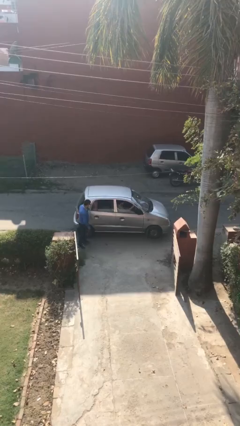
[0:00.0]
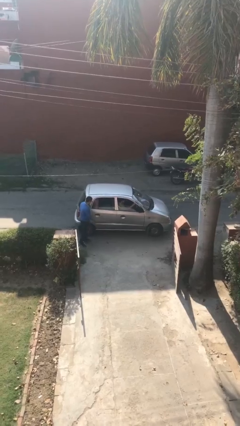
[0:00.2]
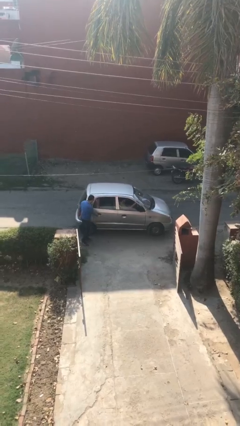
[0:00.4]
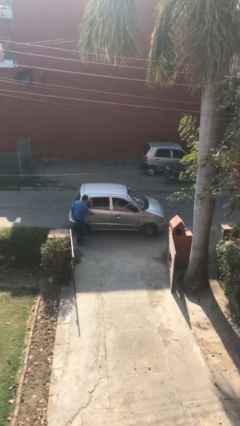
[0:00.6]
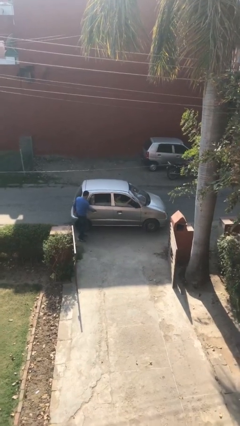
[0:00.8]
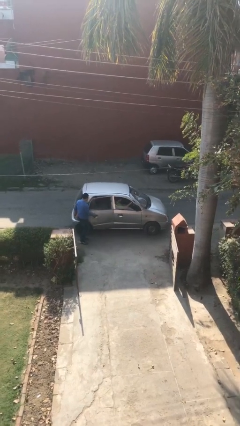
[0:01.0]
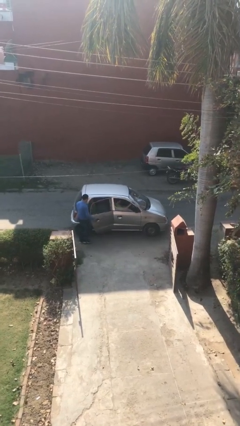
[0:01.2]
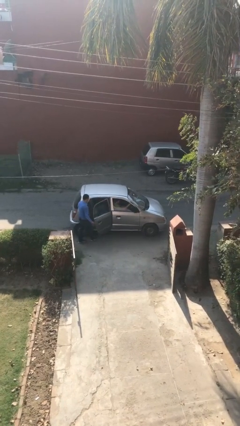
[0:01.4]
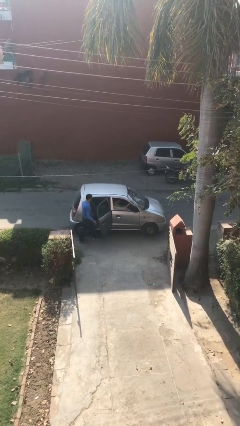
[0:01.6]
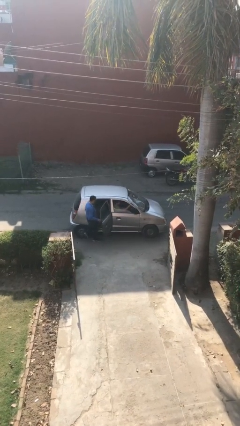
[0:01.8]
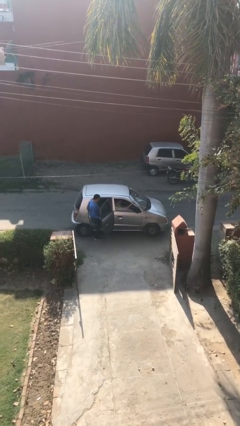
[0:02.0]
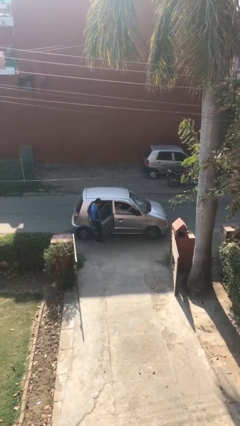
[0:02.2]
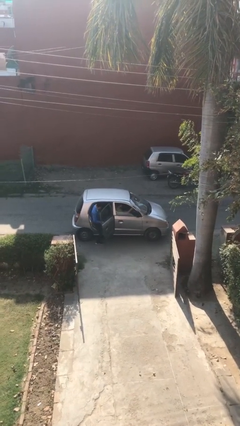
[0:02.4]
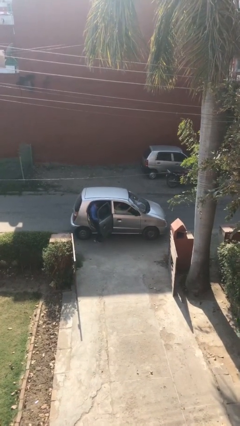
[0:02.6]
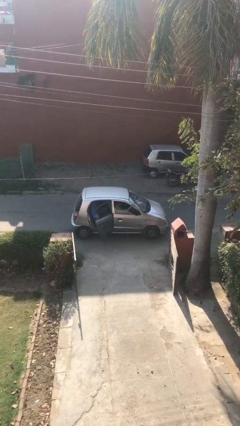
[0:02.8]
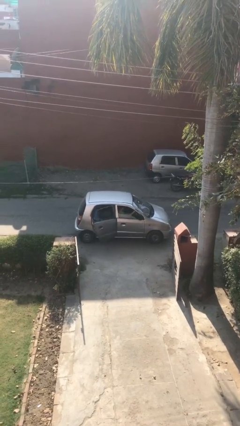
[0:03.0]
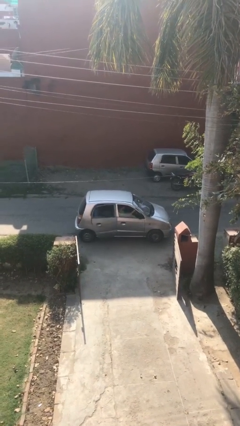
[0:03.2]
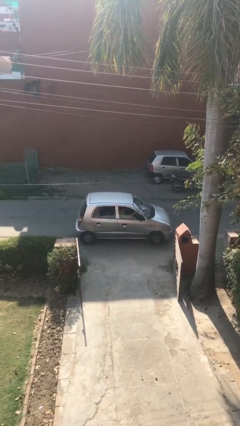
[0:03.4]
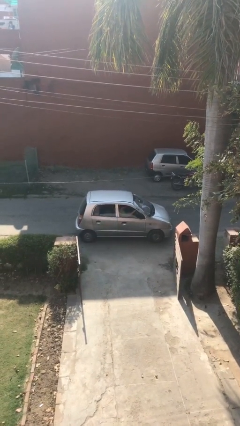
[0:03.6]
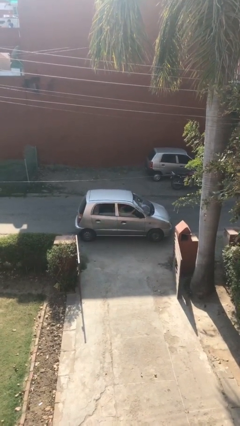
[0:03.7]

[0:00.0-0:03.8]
car picks up person

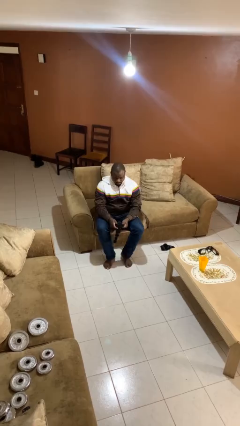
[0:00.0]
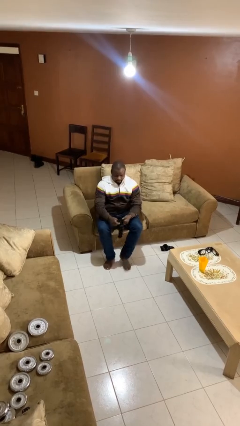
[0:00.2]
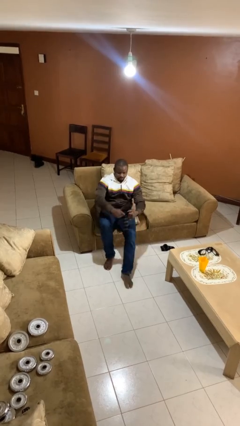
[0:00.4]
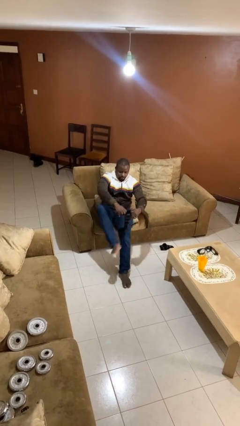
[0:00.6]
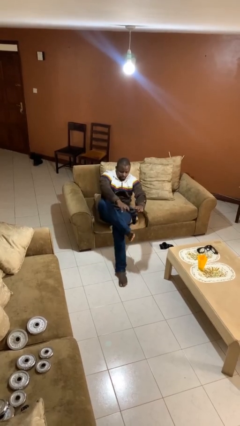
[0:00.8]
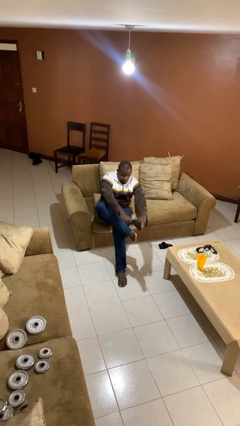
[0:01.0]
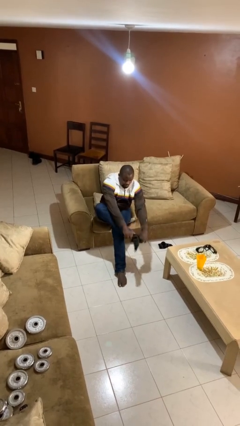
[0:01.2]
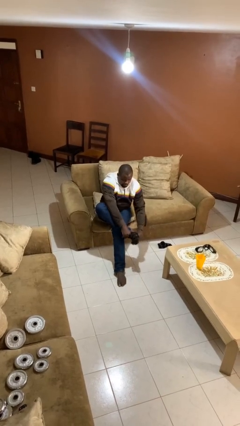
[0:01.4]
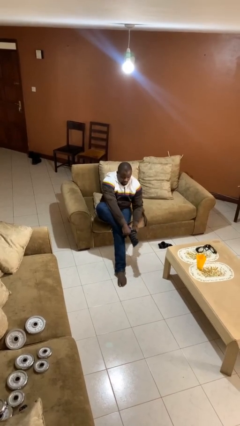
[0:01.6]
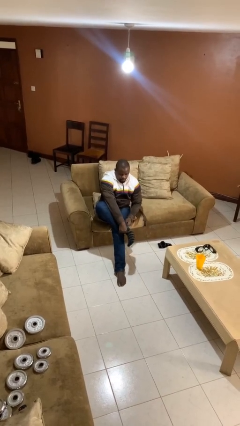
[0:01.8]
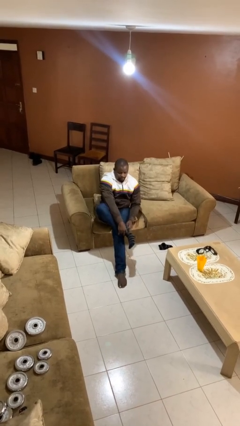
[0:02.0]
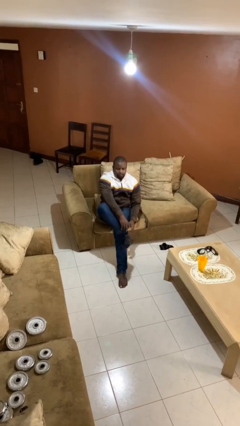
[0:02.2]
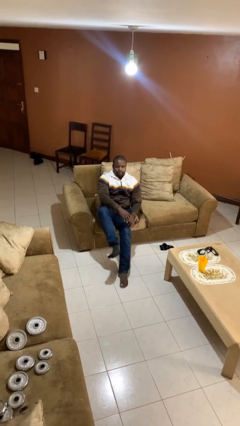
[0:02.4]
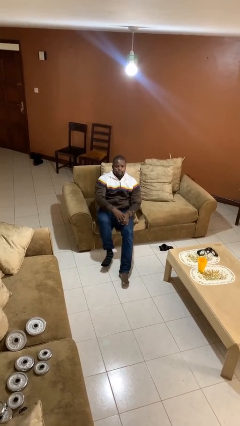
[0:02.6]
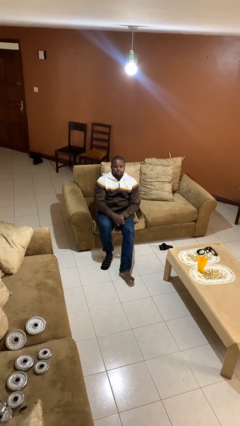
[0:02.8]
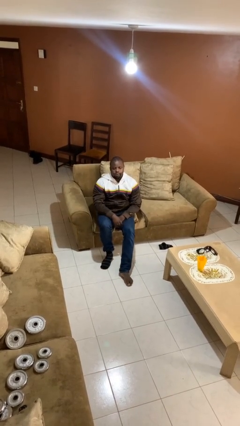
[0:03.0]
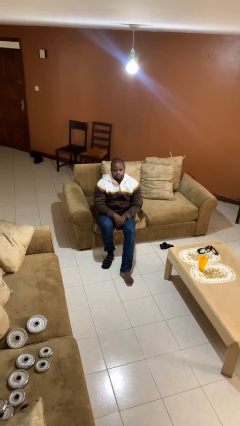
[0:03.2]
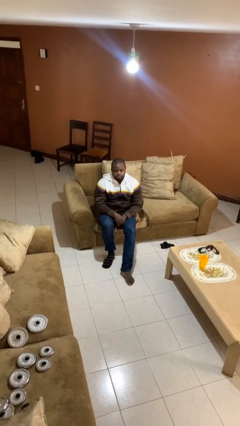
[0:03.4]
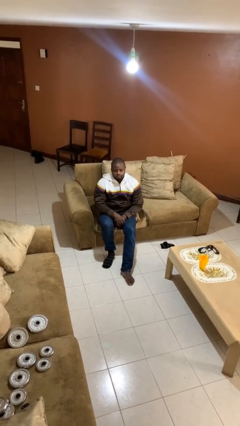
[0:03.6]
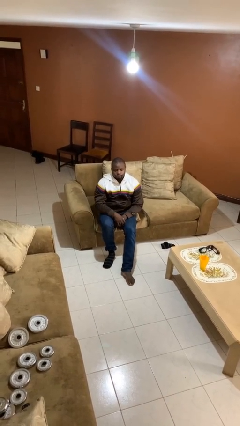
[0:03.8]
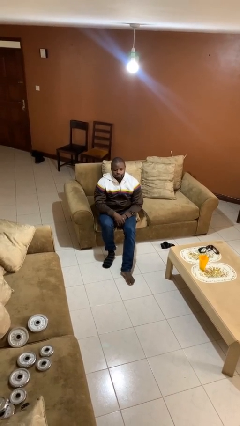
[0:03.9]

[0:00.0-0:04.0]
person puts on socks

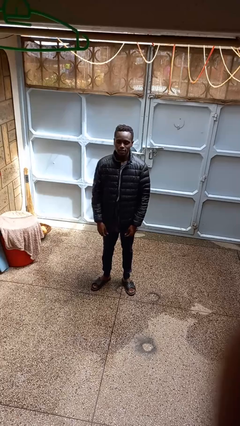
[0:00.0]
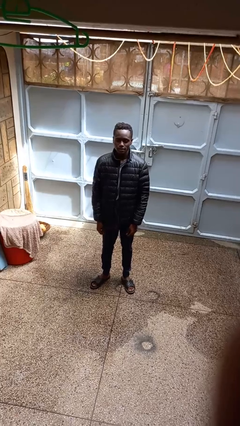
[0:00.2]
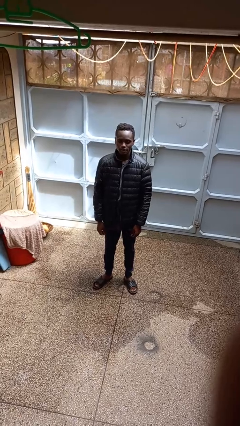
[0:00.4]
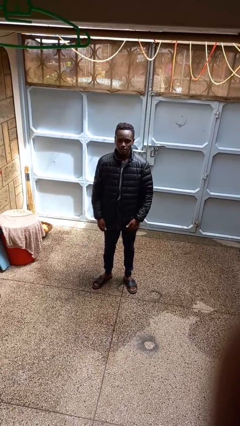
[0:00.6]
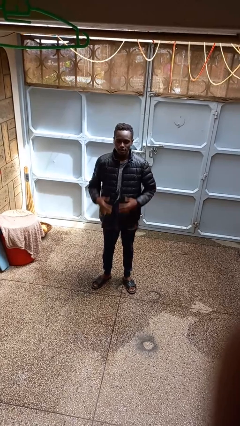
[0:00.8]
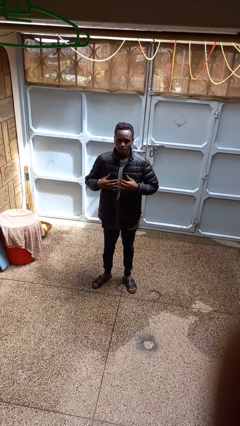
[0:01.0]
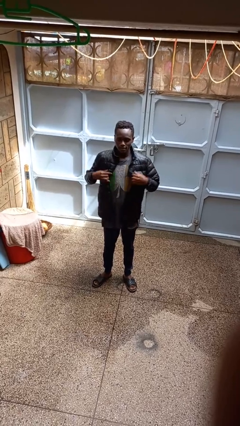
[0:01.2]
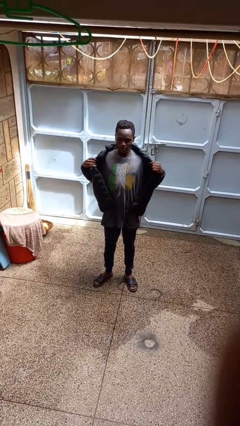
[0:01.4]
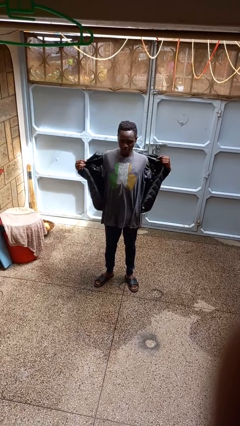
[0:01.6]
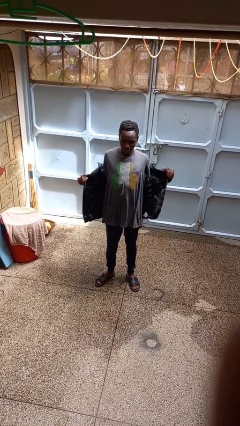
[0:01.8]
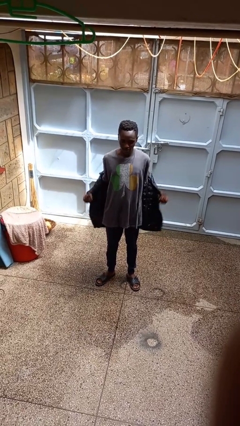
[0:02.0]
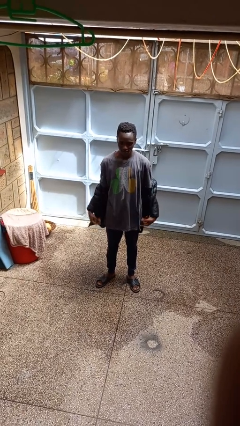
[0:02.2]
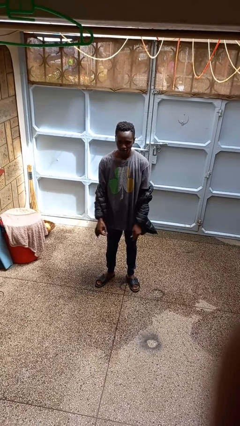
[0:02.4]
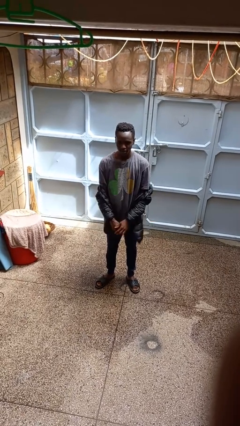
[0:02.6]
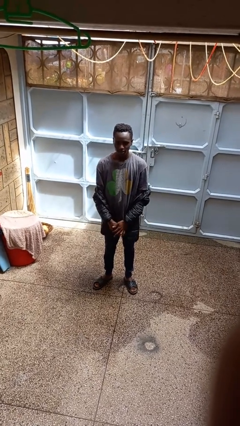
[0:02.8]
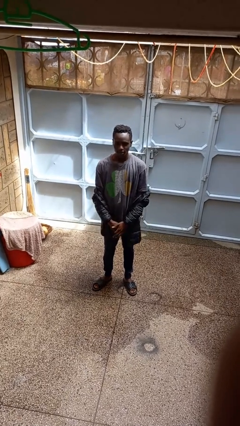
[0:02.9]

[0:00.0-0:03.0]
person takes off jacket

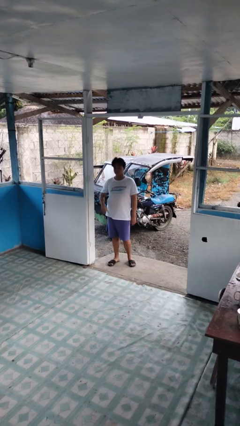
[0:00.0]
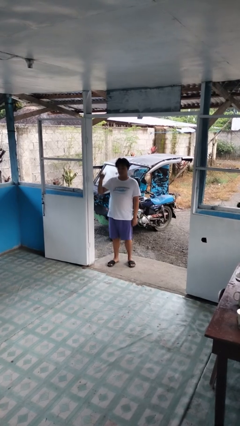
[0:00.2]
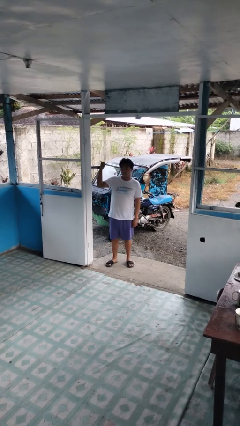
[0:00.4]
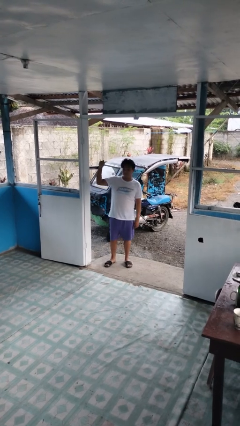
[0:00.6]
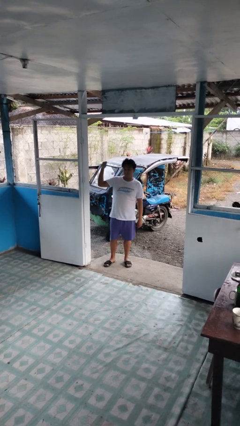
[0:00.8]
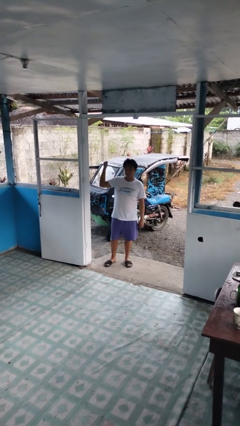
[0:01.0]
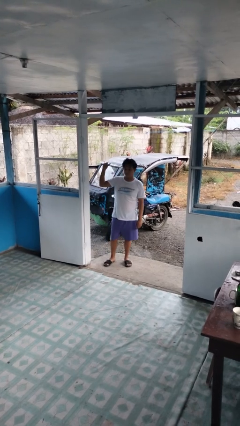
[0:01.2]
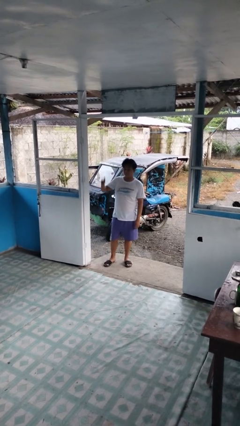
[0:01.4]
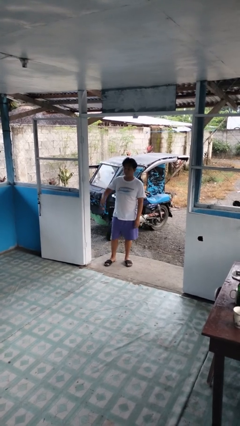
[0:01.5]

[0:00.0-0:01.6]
person gestures hang loose

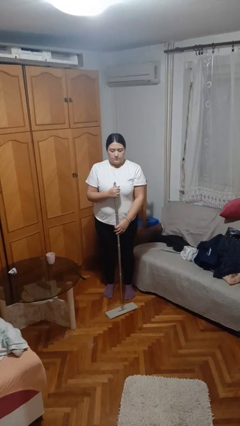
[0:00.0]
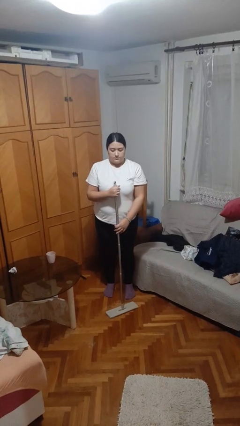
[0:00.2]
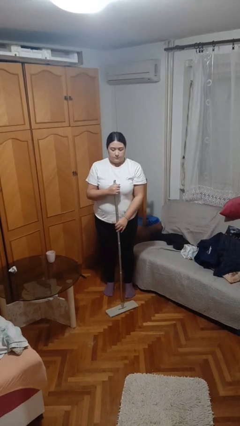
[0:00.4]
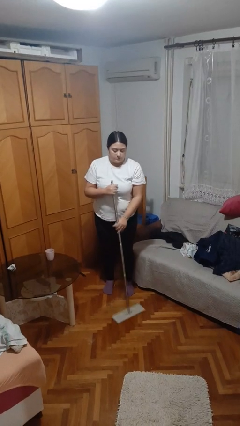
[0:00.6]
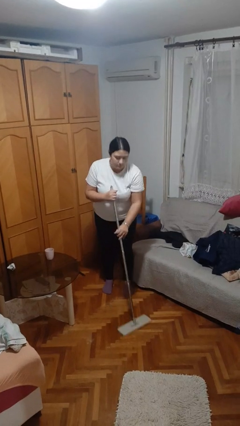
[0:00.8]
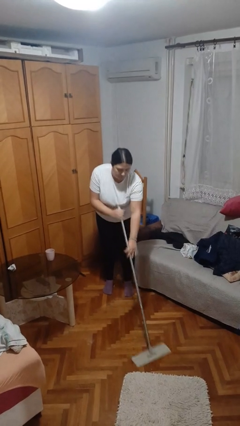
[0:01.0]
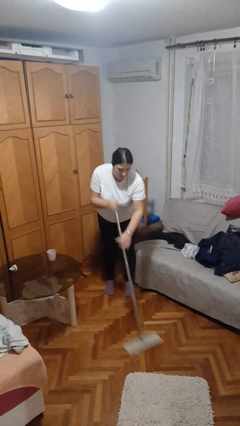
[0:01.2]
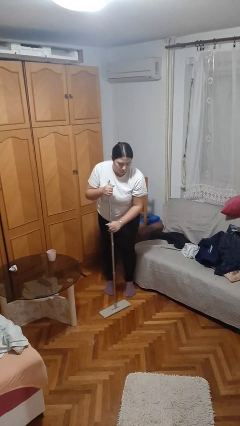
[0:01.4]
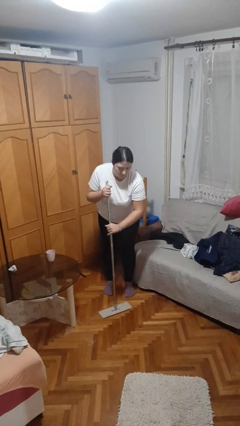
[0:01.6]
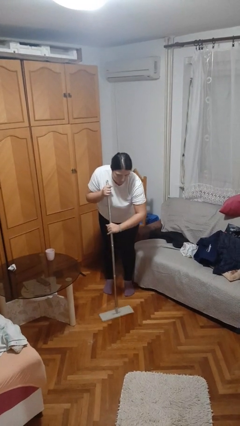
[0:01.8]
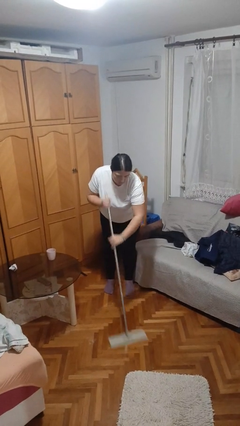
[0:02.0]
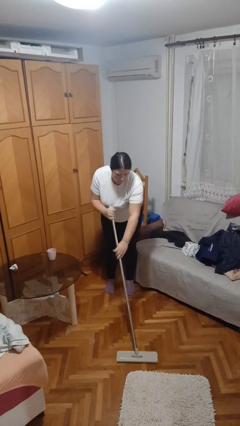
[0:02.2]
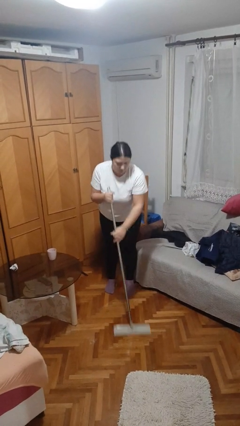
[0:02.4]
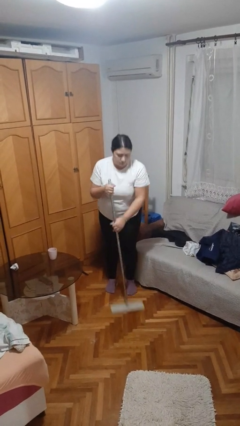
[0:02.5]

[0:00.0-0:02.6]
person mops

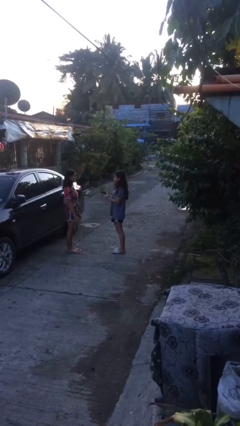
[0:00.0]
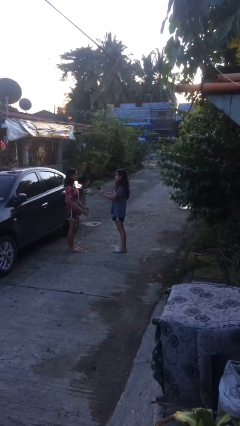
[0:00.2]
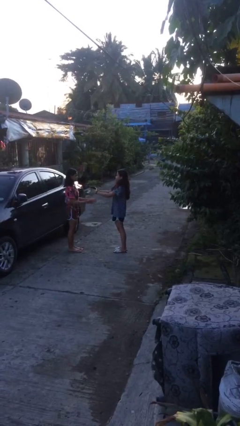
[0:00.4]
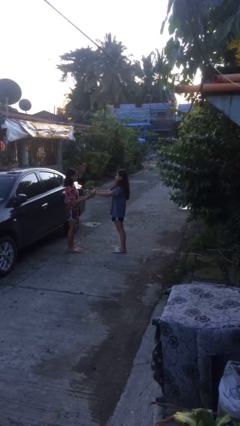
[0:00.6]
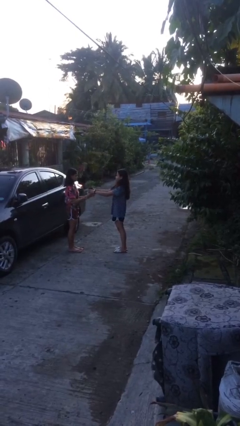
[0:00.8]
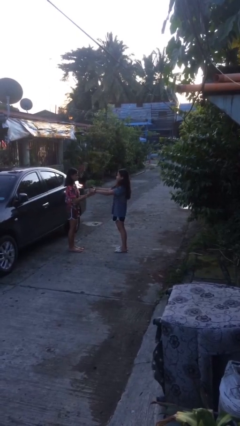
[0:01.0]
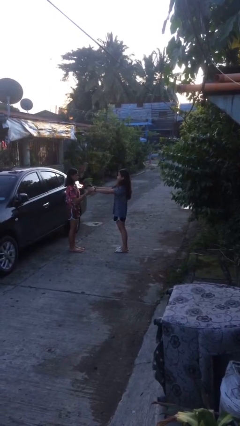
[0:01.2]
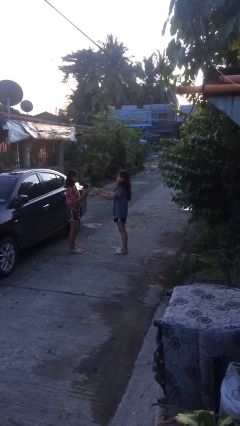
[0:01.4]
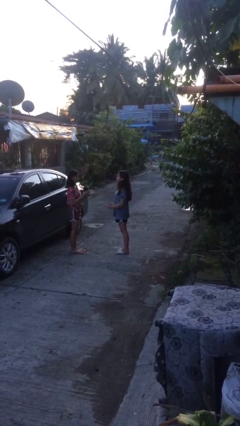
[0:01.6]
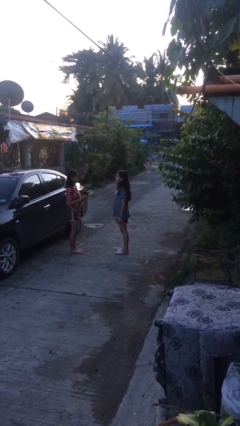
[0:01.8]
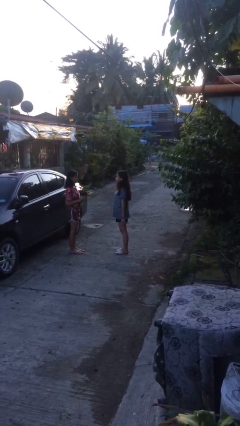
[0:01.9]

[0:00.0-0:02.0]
person transfers object to person

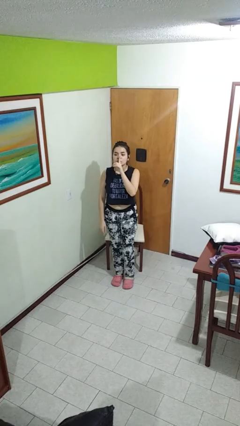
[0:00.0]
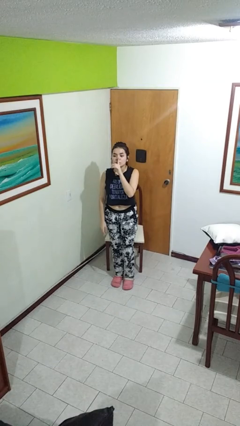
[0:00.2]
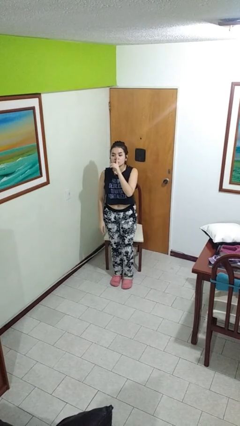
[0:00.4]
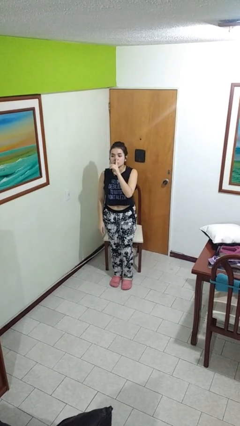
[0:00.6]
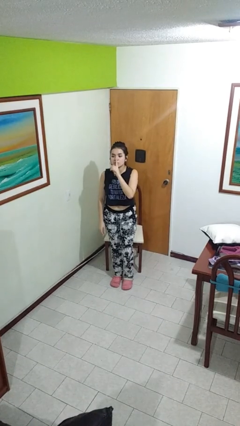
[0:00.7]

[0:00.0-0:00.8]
person gestures be quiet
